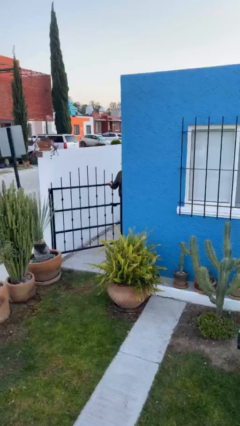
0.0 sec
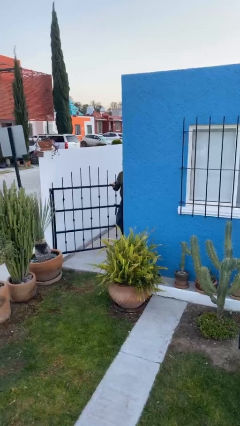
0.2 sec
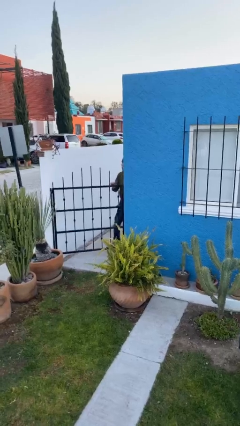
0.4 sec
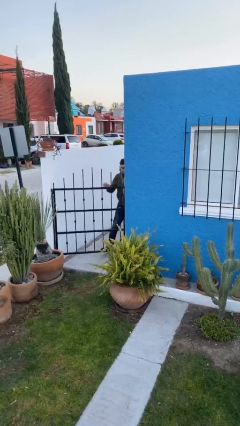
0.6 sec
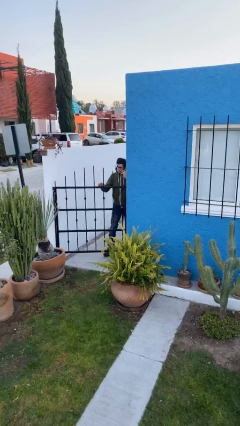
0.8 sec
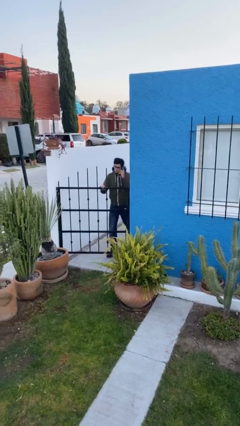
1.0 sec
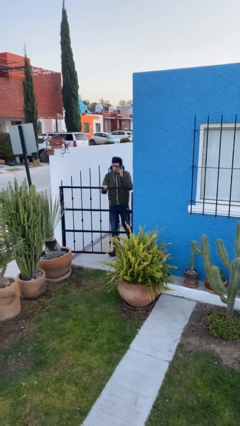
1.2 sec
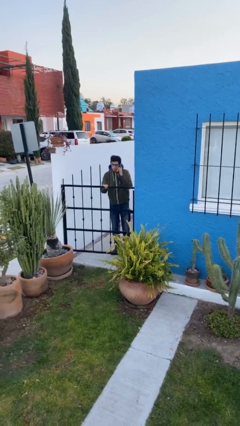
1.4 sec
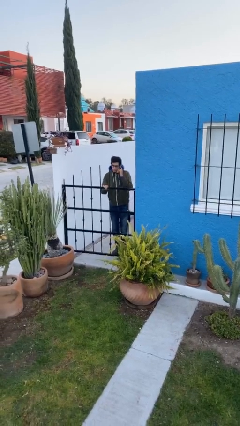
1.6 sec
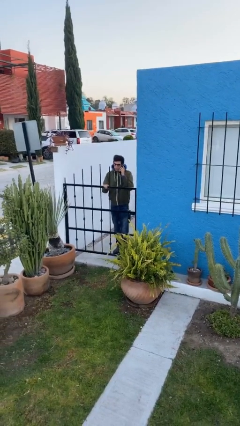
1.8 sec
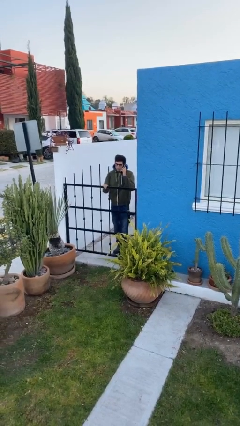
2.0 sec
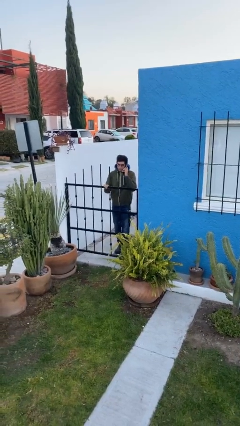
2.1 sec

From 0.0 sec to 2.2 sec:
person closes facility door

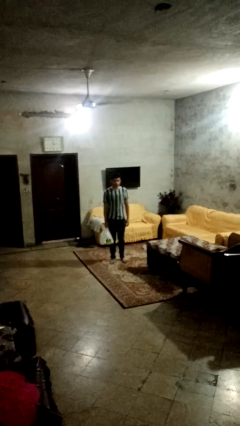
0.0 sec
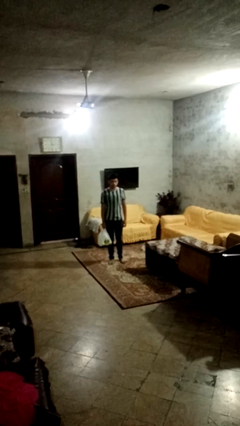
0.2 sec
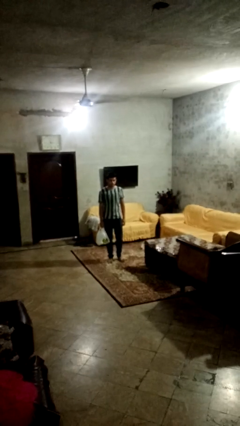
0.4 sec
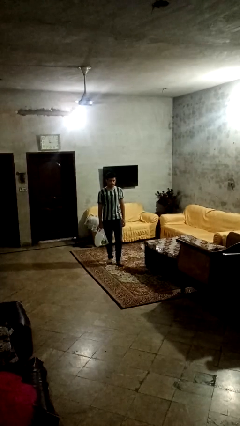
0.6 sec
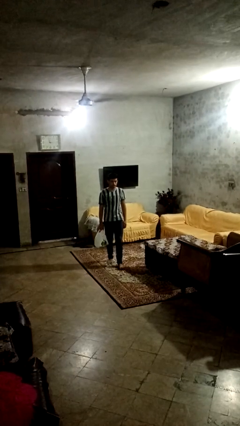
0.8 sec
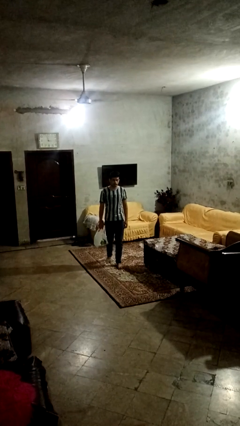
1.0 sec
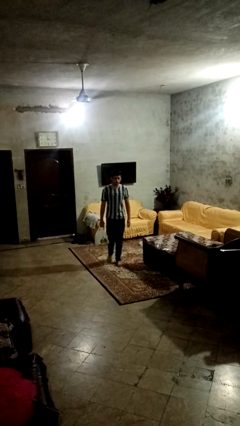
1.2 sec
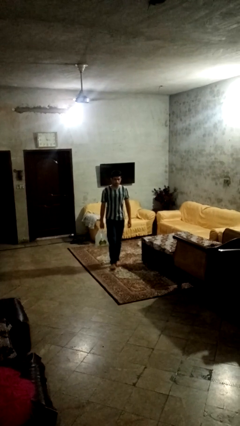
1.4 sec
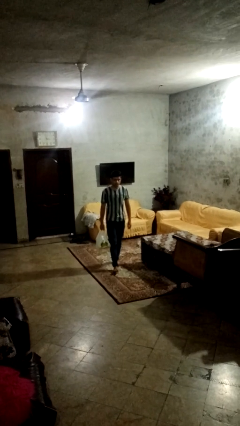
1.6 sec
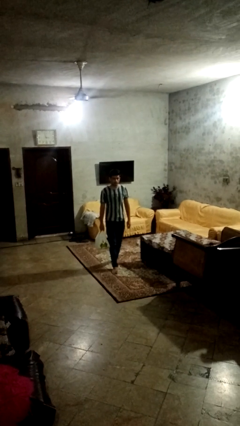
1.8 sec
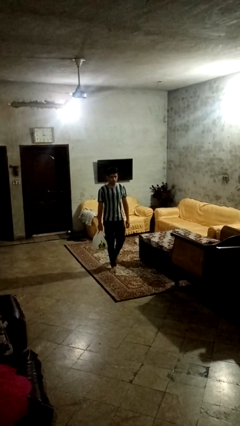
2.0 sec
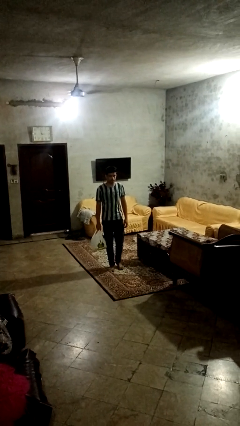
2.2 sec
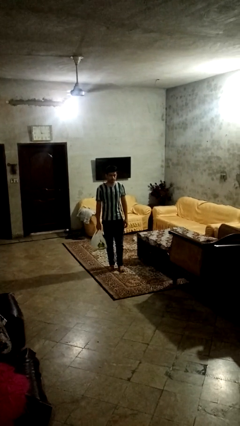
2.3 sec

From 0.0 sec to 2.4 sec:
person carries groceries

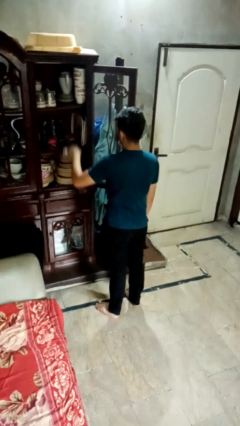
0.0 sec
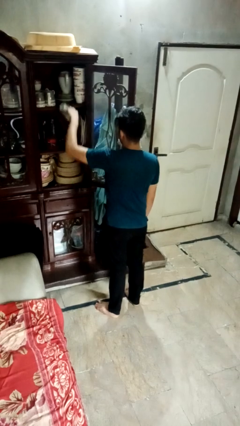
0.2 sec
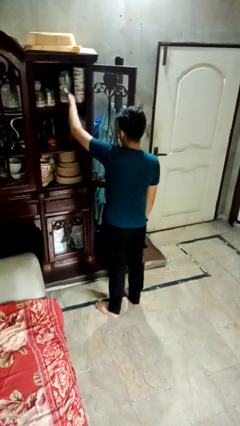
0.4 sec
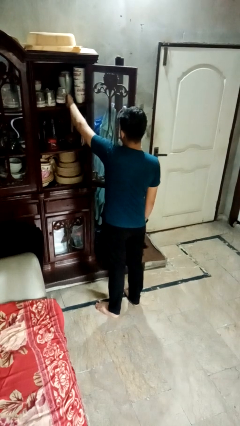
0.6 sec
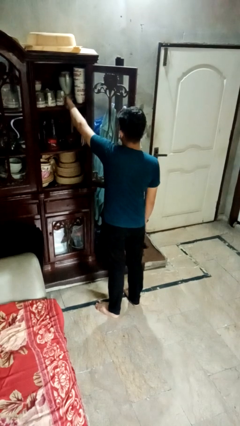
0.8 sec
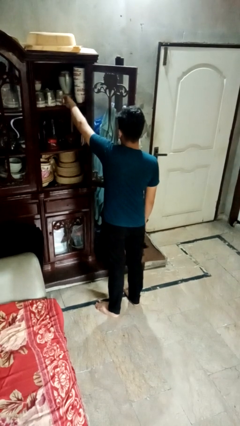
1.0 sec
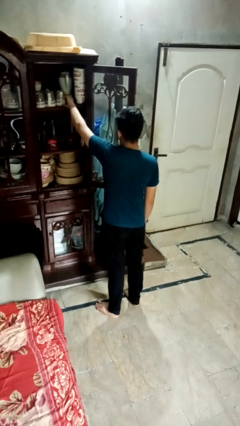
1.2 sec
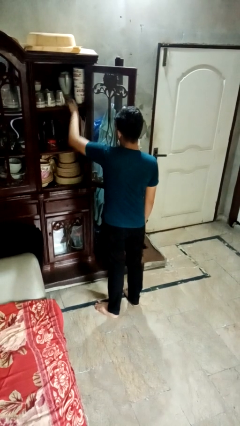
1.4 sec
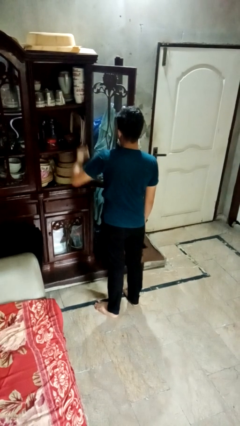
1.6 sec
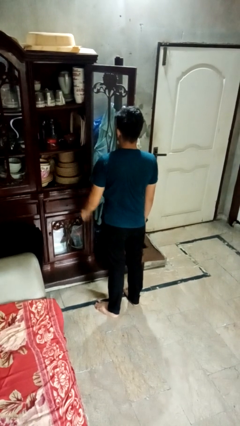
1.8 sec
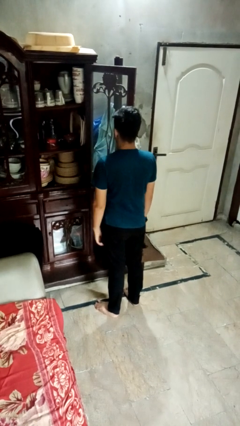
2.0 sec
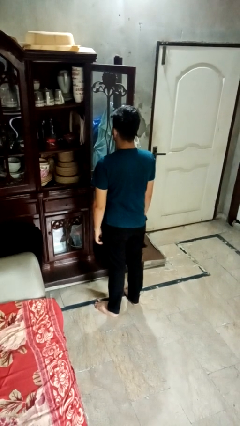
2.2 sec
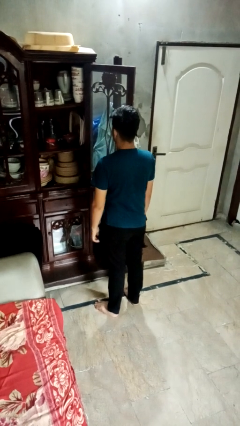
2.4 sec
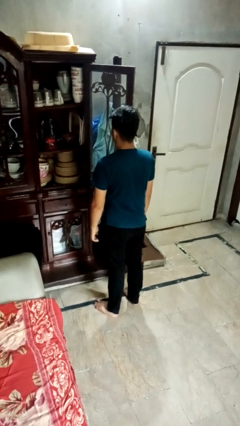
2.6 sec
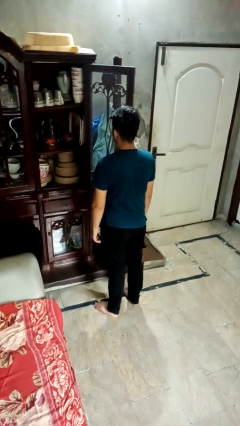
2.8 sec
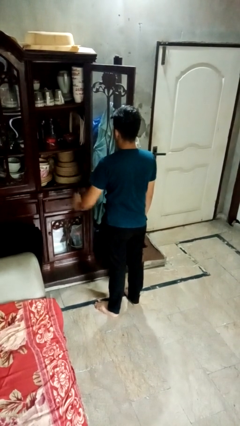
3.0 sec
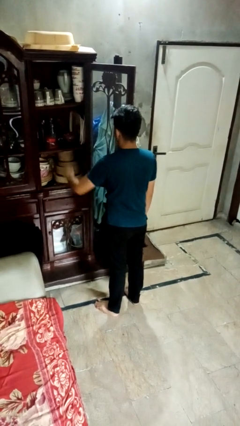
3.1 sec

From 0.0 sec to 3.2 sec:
person puts object in cabinet

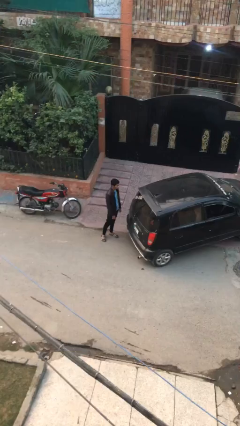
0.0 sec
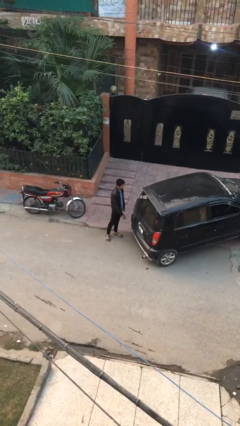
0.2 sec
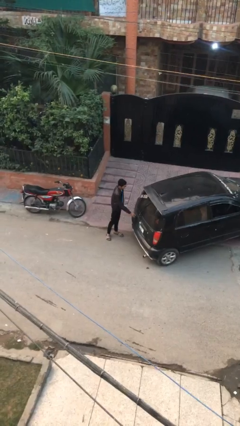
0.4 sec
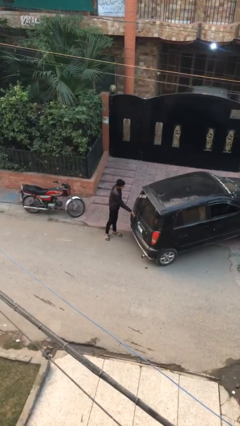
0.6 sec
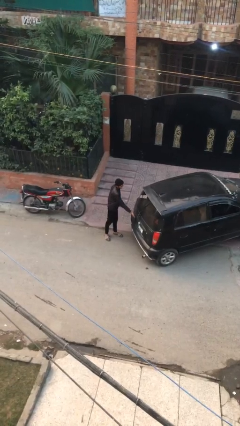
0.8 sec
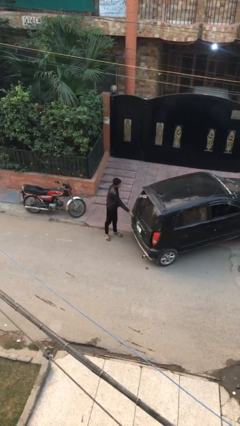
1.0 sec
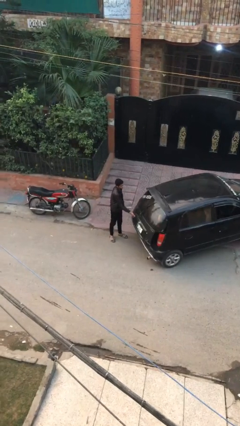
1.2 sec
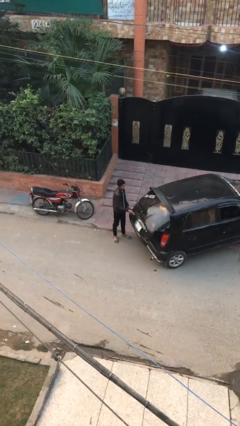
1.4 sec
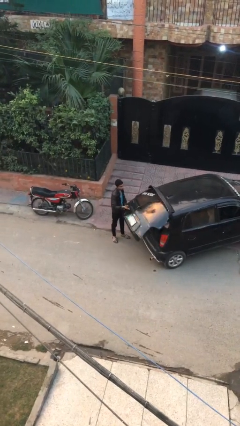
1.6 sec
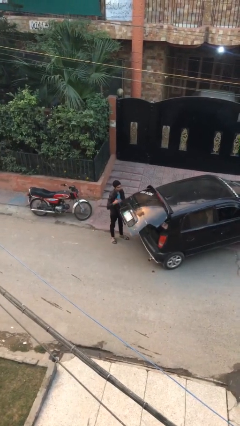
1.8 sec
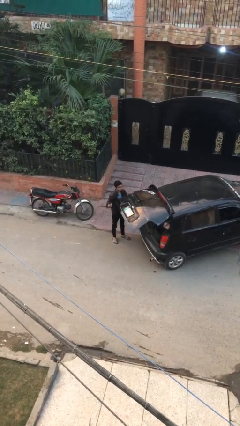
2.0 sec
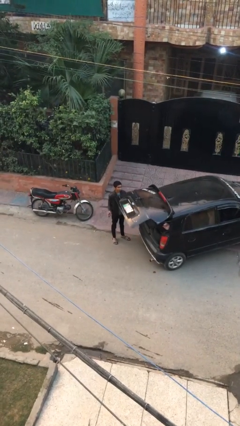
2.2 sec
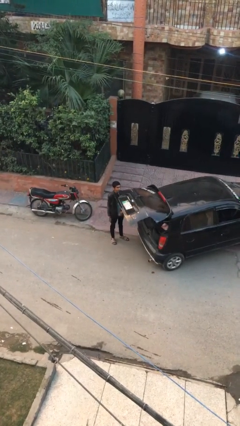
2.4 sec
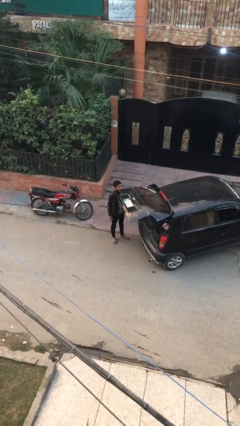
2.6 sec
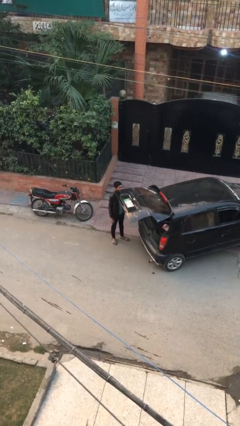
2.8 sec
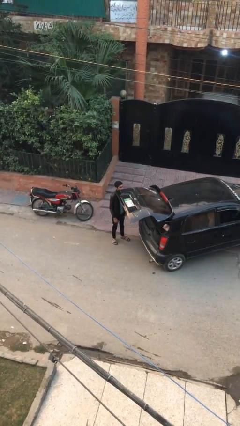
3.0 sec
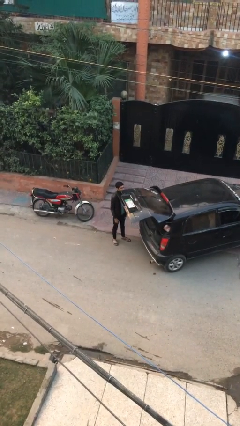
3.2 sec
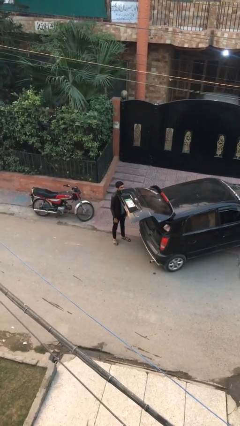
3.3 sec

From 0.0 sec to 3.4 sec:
person opens car trunk

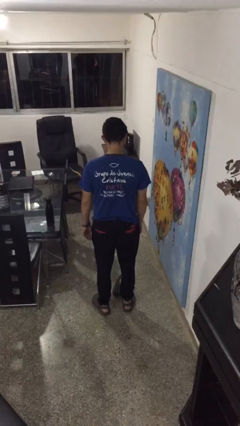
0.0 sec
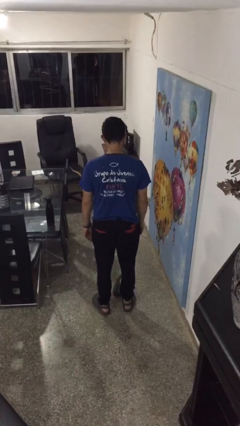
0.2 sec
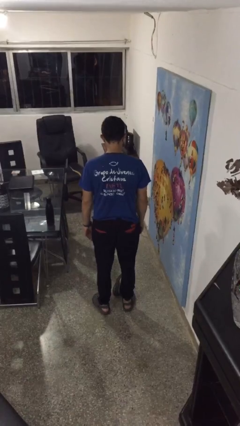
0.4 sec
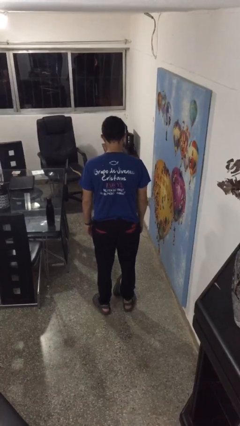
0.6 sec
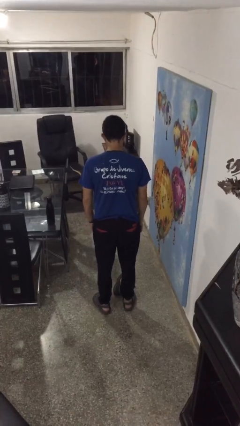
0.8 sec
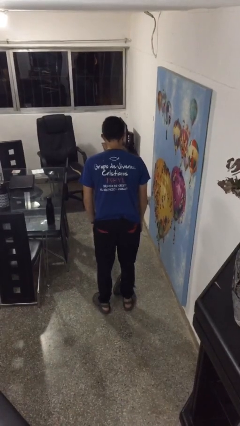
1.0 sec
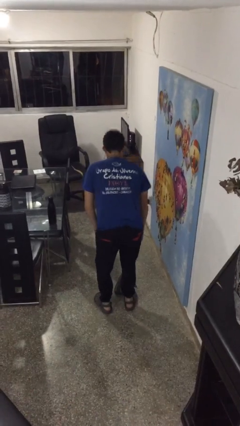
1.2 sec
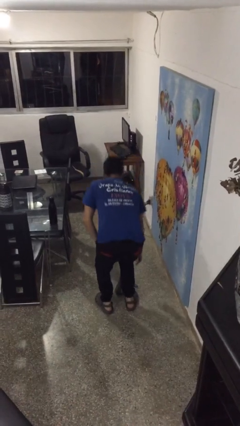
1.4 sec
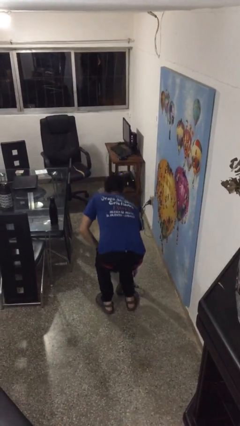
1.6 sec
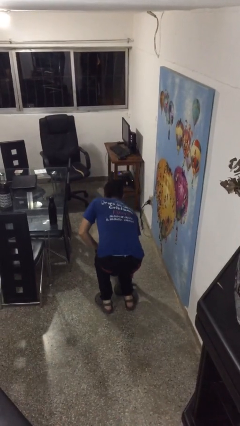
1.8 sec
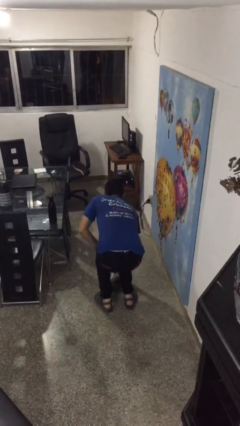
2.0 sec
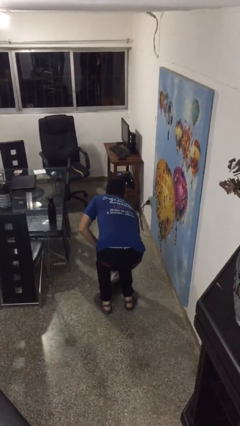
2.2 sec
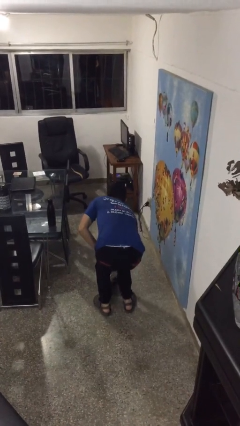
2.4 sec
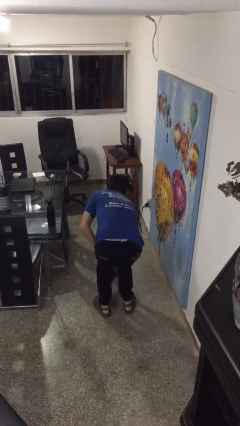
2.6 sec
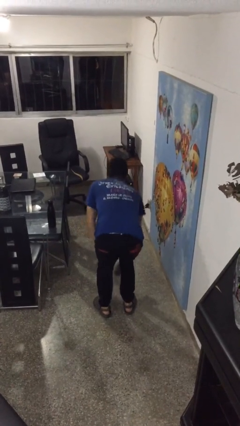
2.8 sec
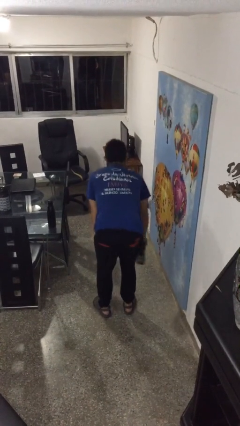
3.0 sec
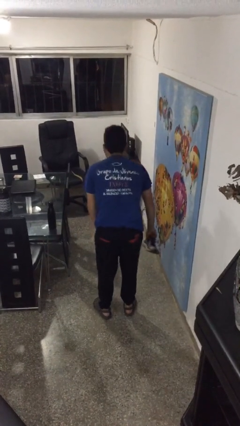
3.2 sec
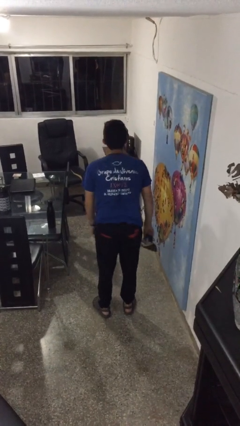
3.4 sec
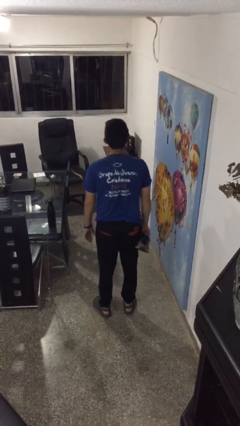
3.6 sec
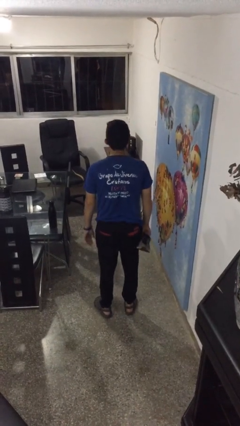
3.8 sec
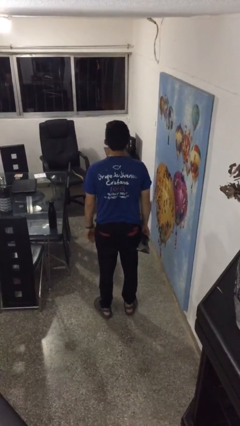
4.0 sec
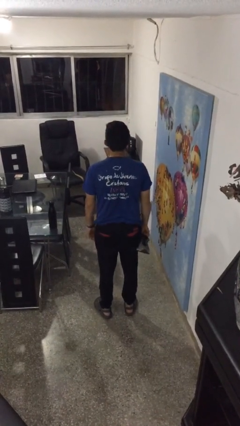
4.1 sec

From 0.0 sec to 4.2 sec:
person picks up object from floor

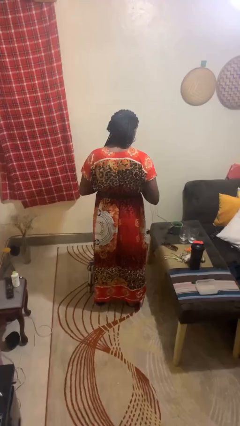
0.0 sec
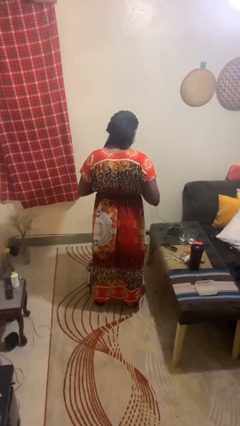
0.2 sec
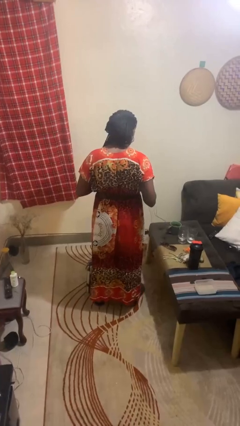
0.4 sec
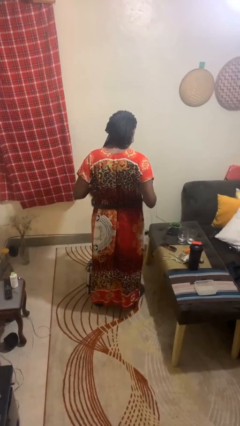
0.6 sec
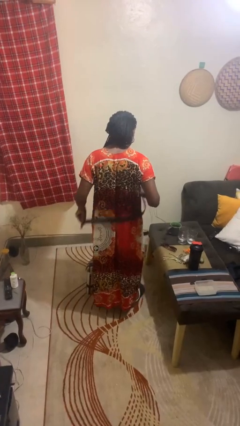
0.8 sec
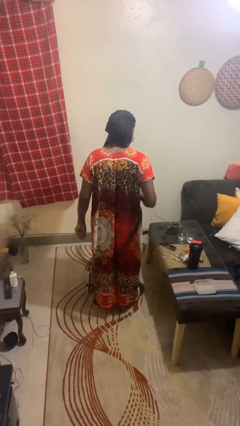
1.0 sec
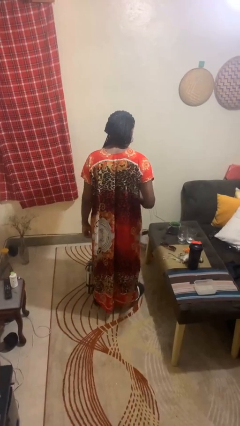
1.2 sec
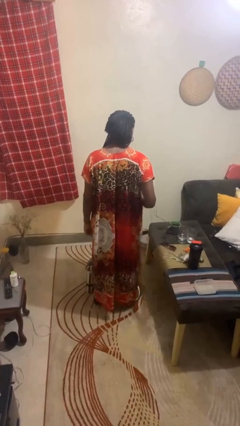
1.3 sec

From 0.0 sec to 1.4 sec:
person takes off belt

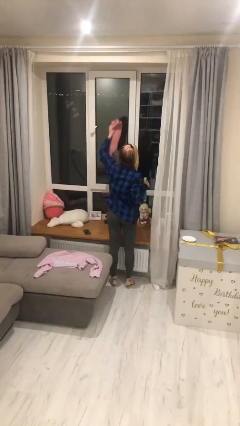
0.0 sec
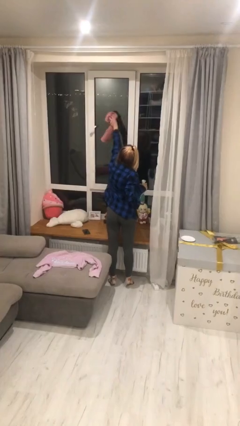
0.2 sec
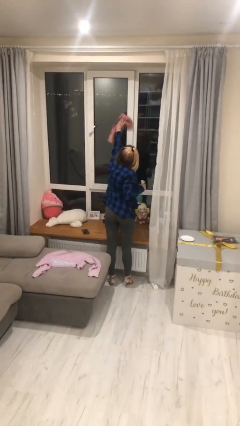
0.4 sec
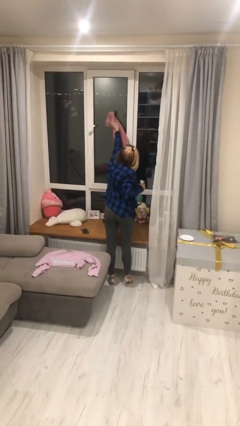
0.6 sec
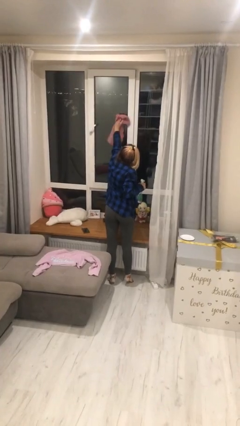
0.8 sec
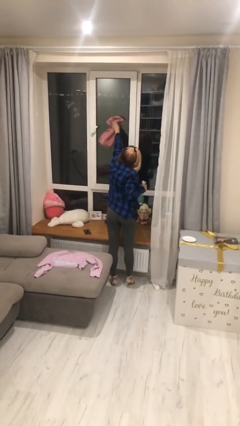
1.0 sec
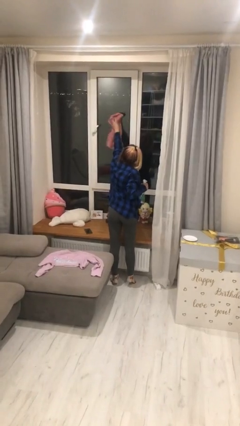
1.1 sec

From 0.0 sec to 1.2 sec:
person washes window
